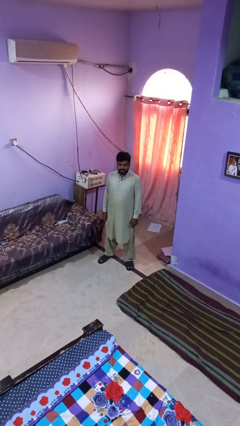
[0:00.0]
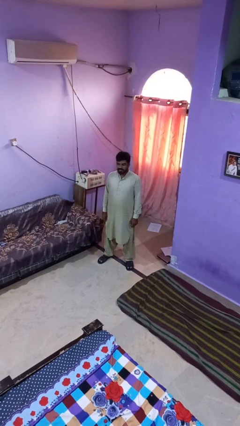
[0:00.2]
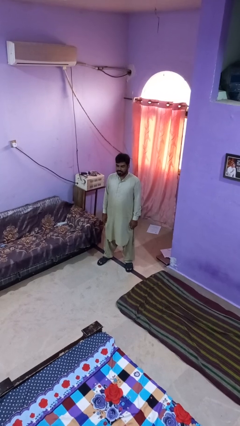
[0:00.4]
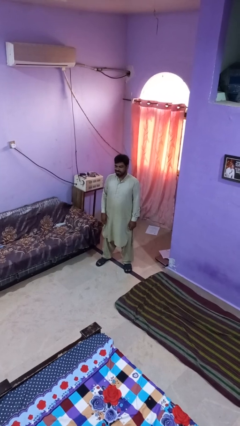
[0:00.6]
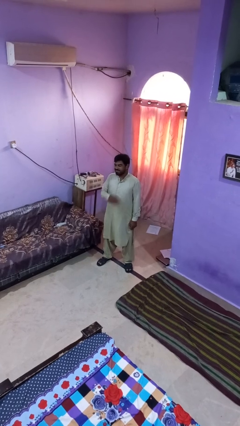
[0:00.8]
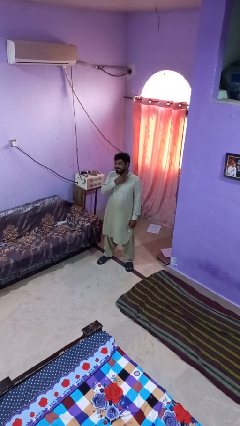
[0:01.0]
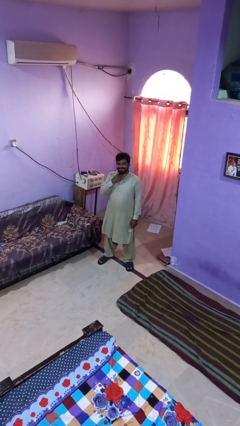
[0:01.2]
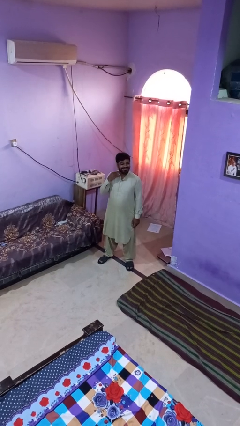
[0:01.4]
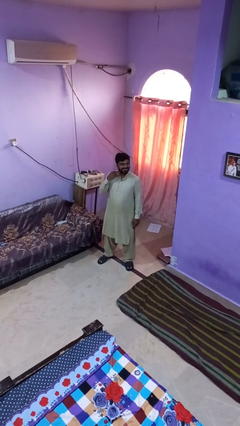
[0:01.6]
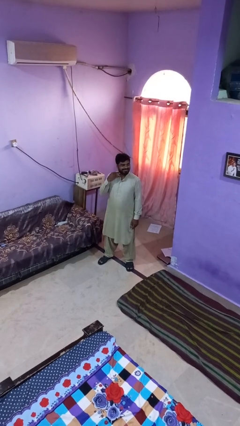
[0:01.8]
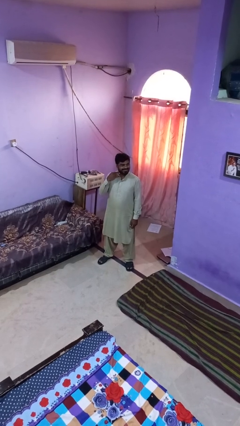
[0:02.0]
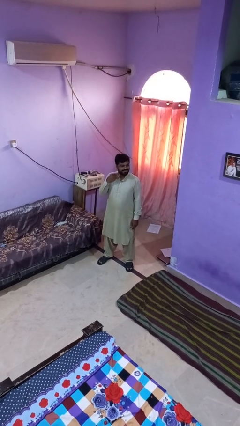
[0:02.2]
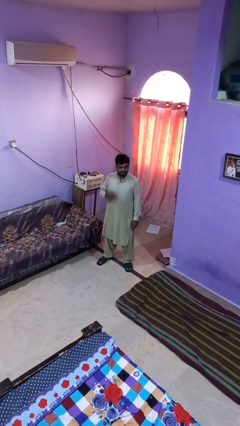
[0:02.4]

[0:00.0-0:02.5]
person gestures cut

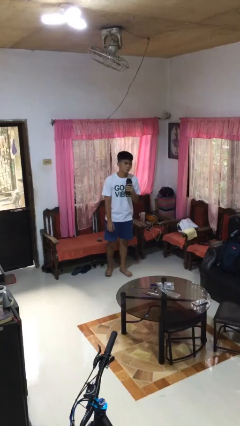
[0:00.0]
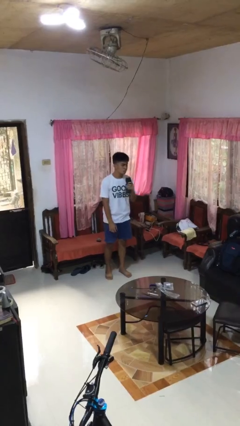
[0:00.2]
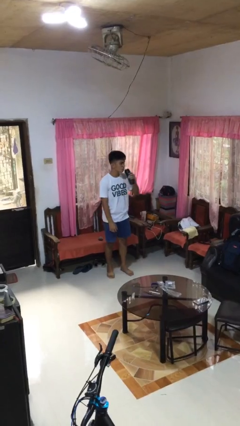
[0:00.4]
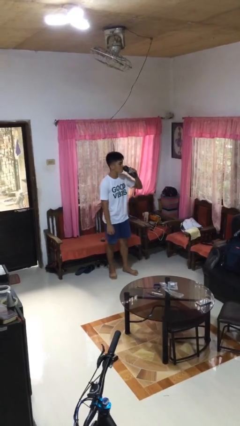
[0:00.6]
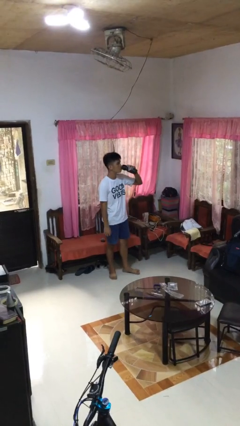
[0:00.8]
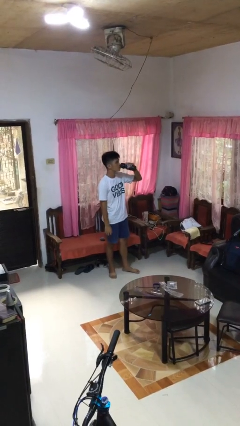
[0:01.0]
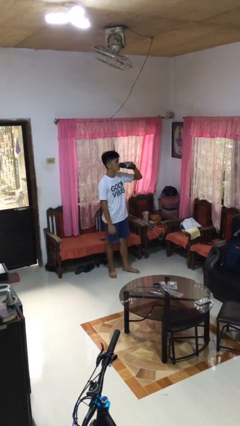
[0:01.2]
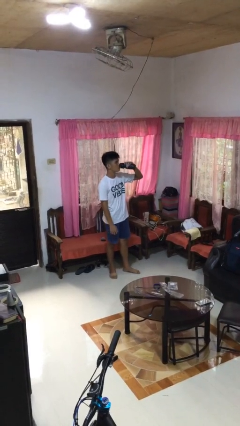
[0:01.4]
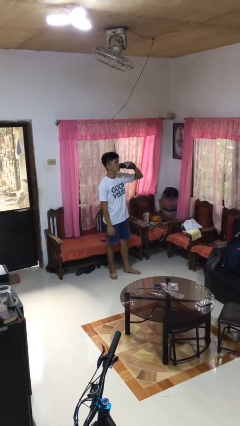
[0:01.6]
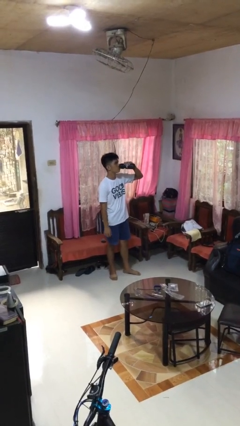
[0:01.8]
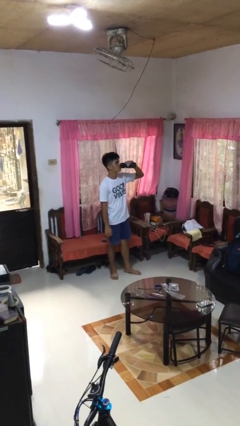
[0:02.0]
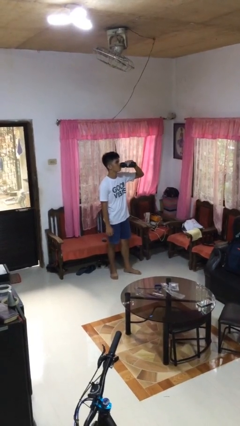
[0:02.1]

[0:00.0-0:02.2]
person drinks from bottle

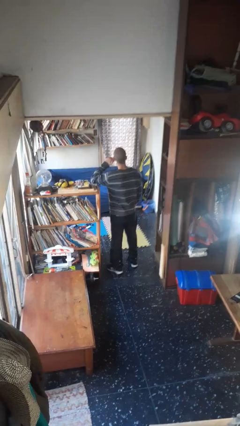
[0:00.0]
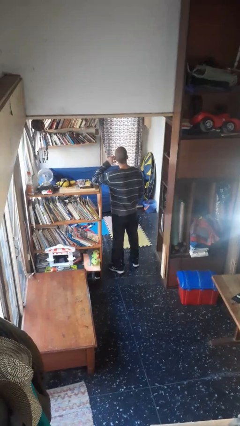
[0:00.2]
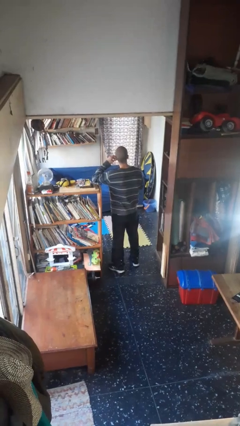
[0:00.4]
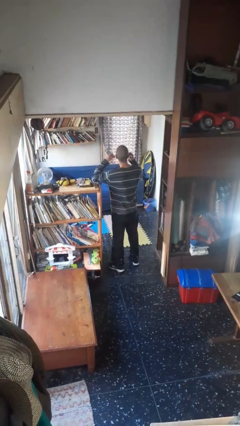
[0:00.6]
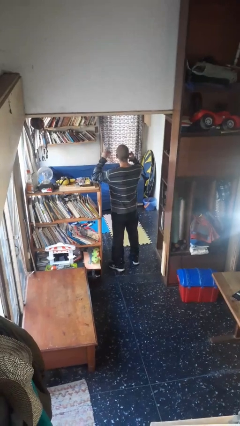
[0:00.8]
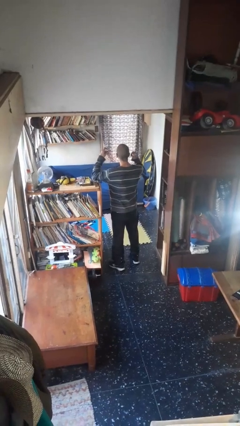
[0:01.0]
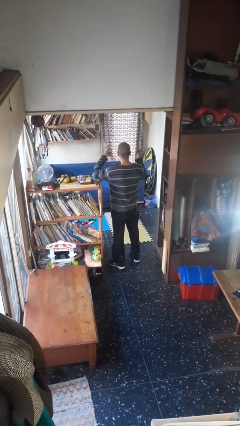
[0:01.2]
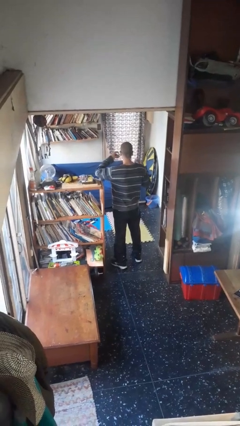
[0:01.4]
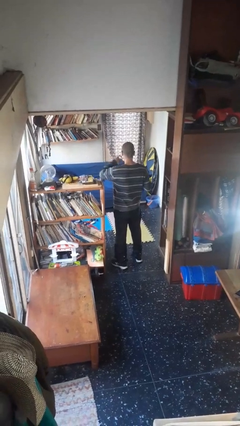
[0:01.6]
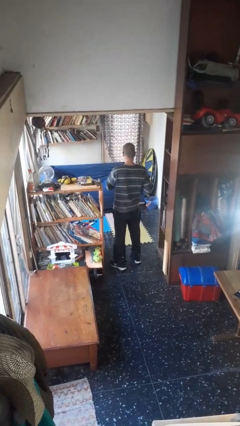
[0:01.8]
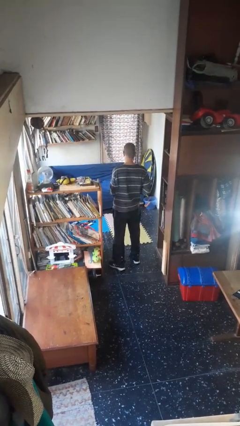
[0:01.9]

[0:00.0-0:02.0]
person takes off headphones

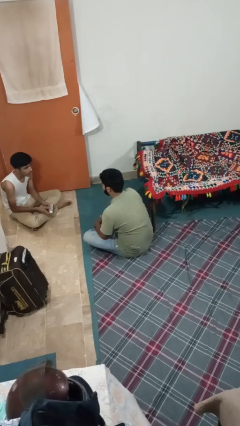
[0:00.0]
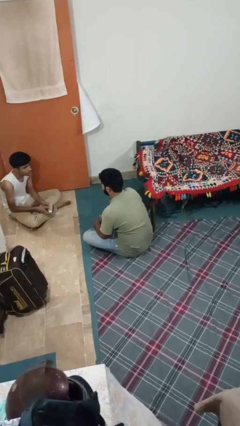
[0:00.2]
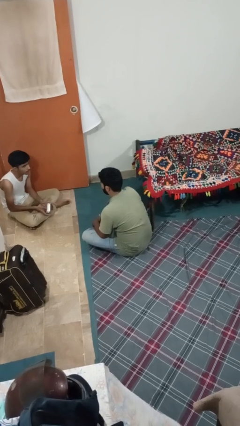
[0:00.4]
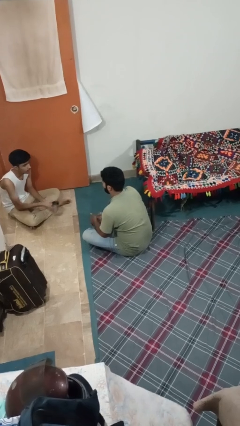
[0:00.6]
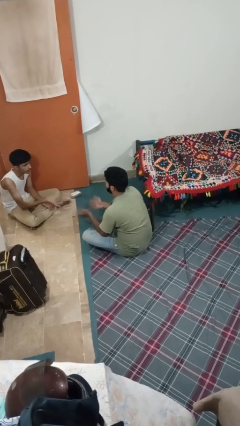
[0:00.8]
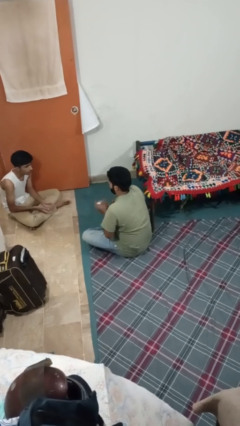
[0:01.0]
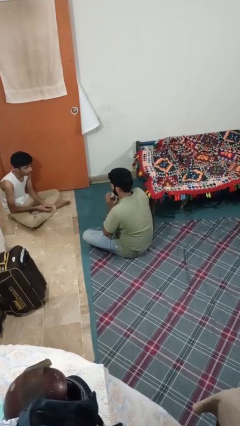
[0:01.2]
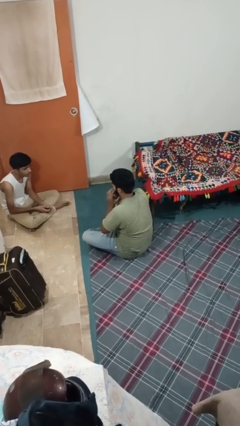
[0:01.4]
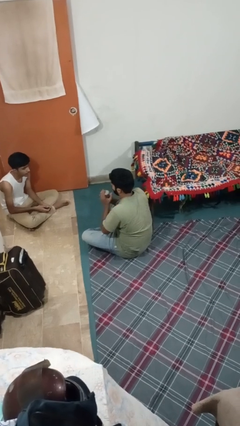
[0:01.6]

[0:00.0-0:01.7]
person catches object from person

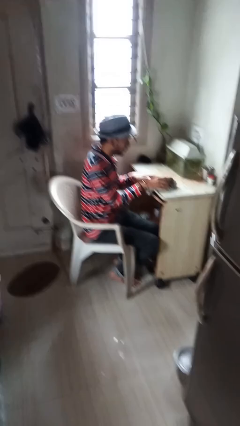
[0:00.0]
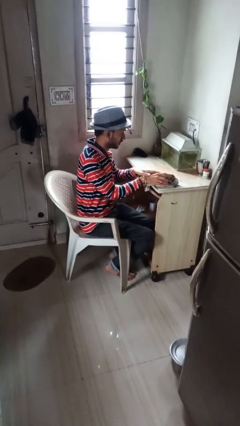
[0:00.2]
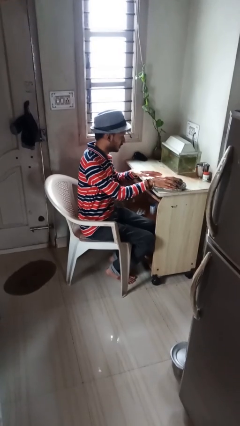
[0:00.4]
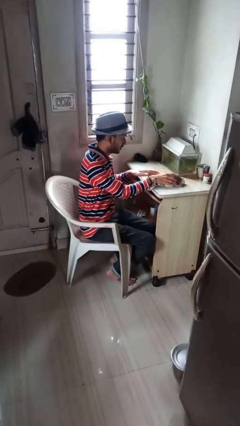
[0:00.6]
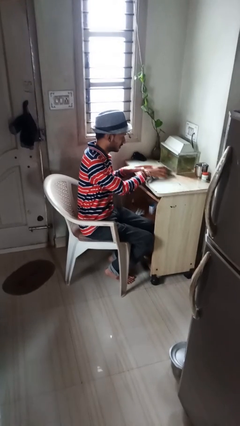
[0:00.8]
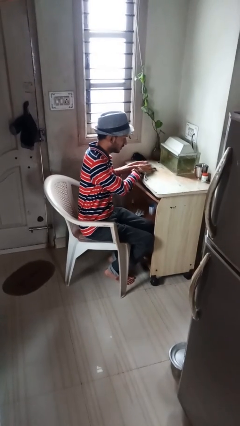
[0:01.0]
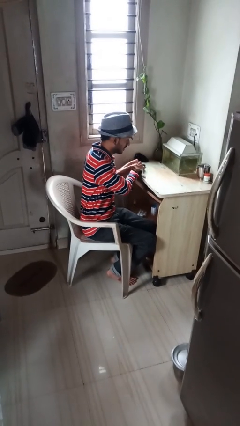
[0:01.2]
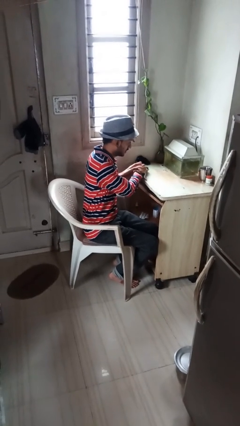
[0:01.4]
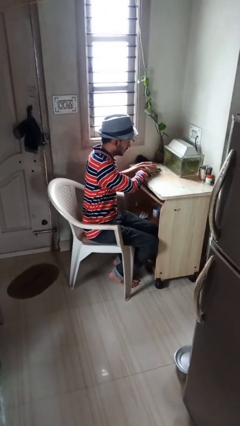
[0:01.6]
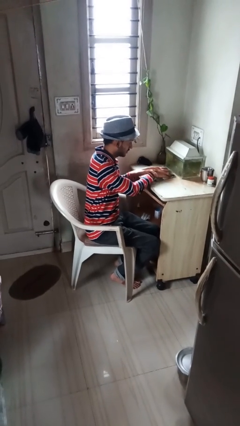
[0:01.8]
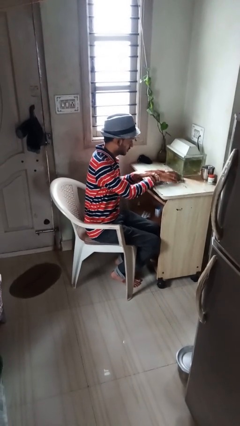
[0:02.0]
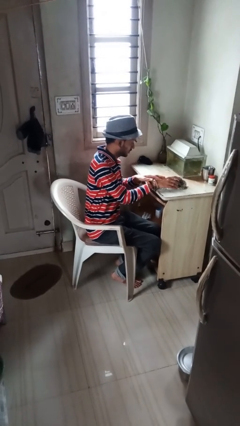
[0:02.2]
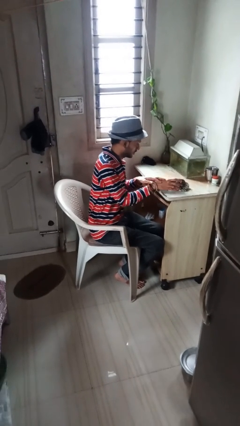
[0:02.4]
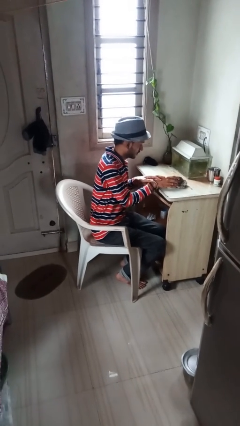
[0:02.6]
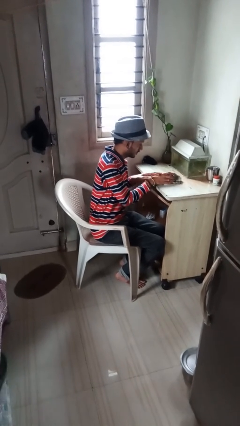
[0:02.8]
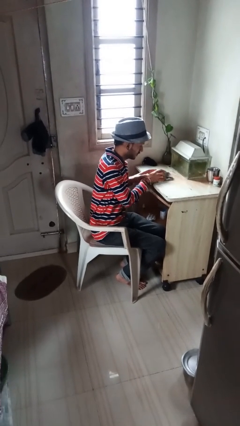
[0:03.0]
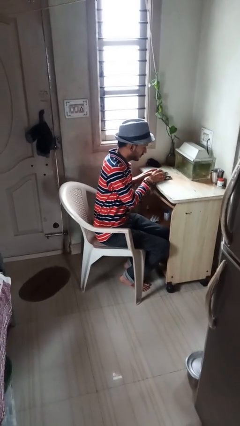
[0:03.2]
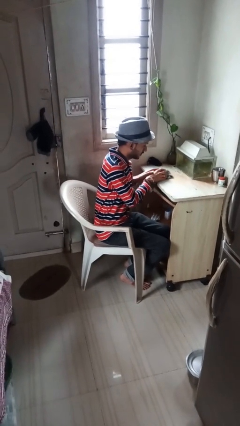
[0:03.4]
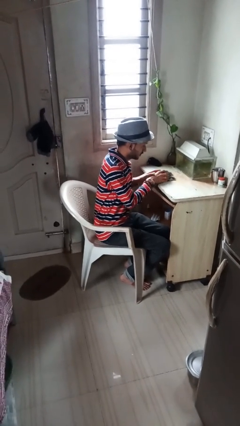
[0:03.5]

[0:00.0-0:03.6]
person cleans table with rag

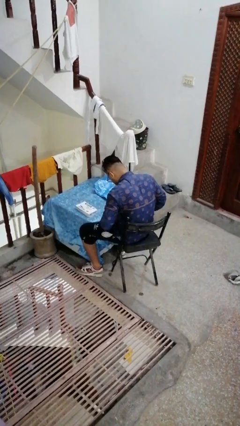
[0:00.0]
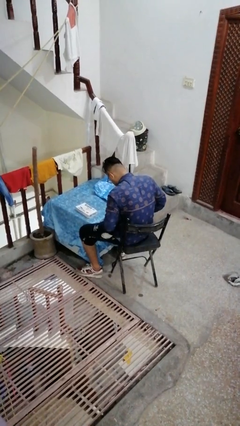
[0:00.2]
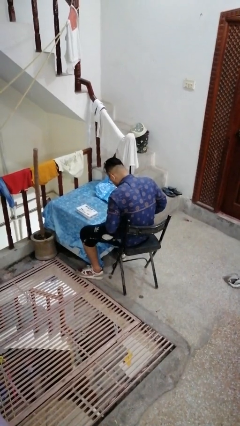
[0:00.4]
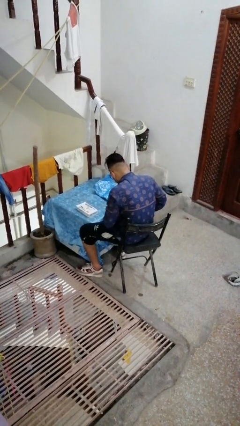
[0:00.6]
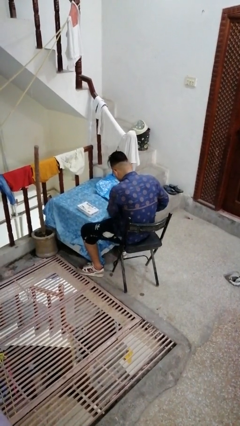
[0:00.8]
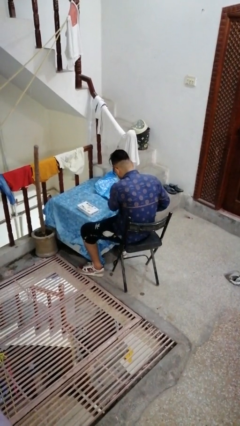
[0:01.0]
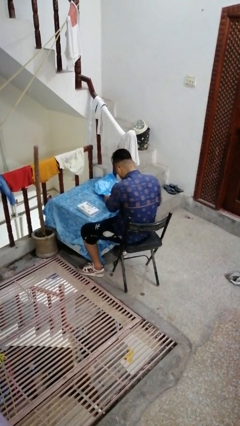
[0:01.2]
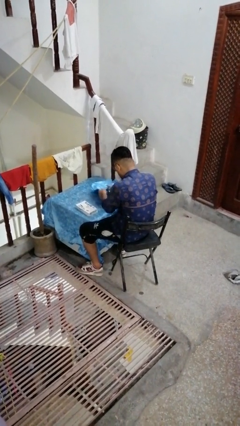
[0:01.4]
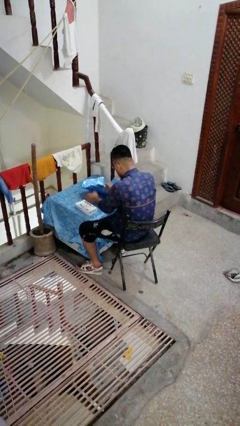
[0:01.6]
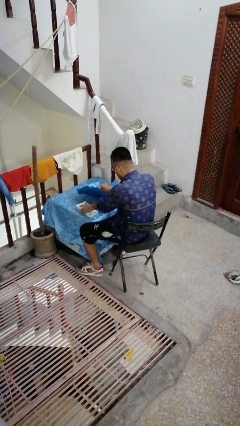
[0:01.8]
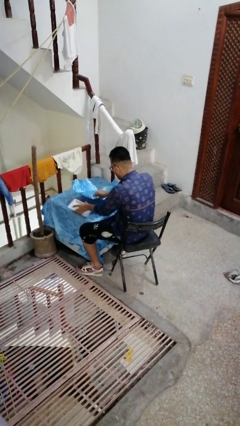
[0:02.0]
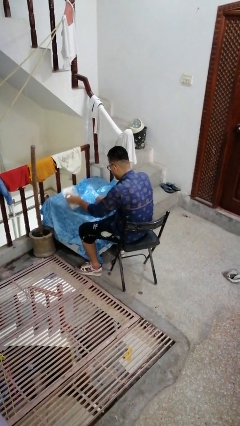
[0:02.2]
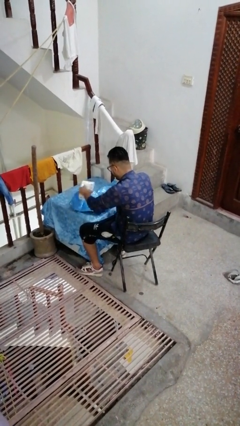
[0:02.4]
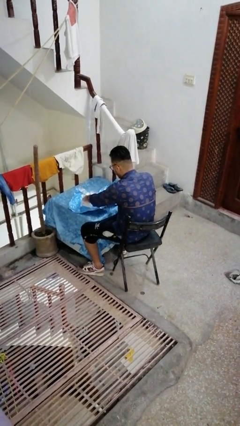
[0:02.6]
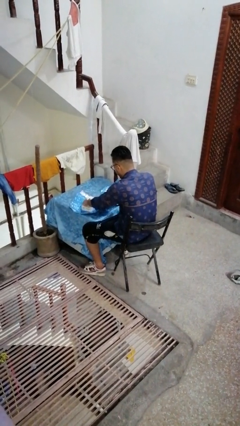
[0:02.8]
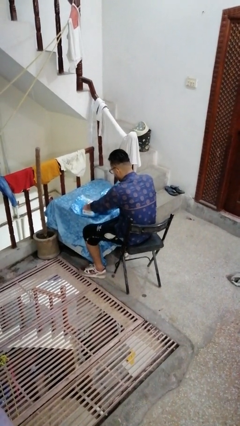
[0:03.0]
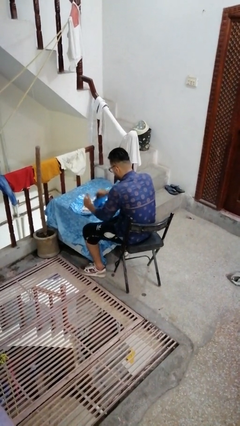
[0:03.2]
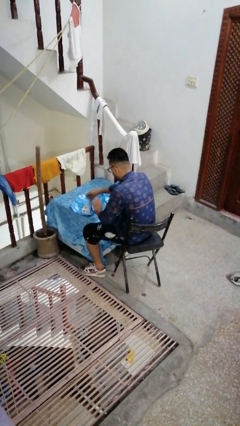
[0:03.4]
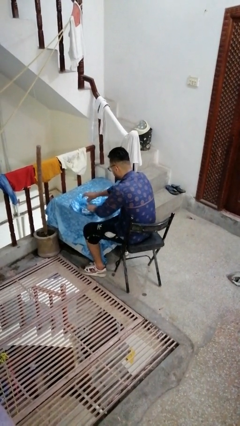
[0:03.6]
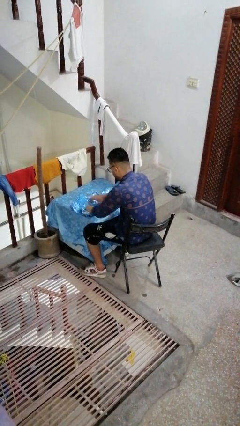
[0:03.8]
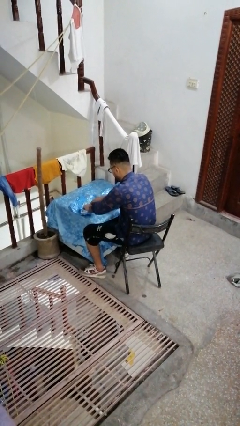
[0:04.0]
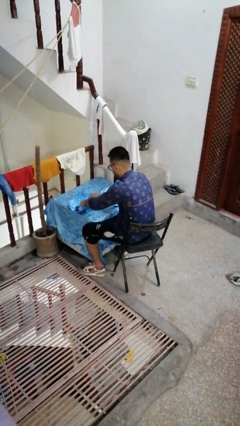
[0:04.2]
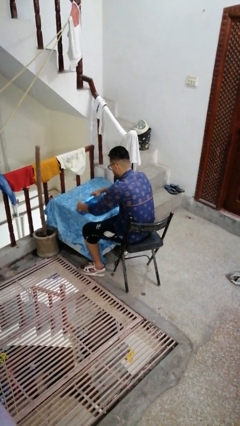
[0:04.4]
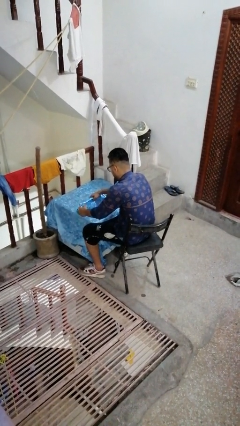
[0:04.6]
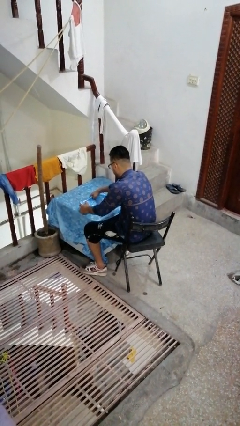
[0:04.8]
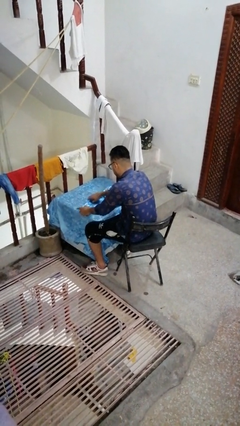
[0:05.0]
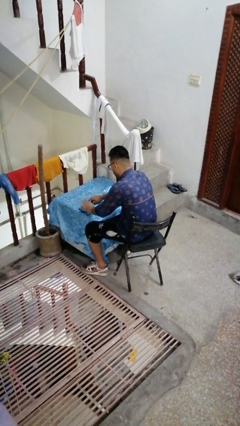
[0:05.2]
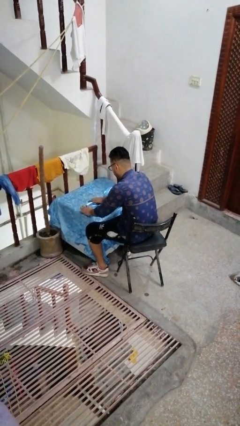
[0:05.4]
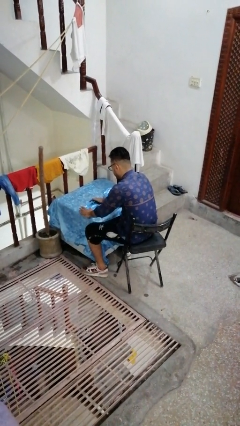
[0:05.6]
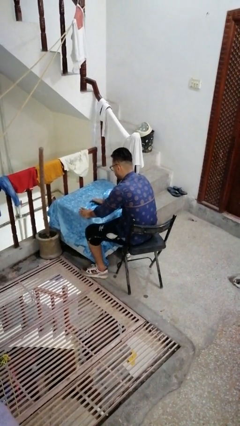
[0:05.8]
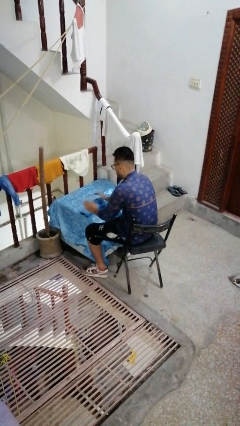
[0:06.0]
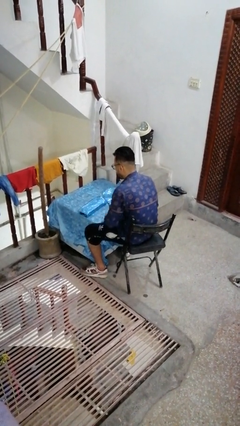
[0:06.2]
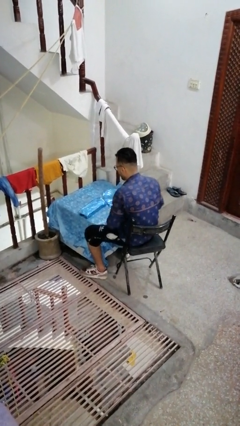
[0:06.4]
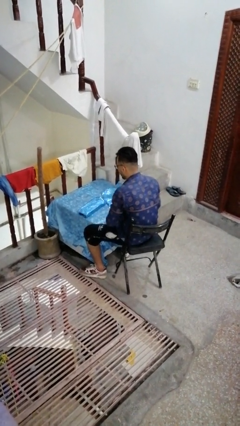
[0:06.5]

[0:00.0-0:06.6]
person wraps box
